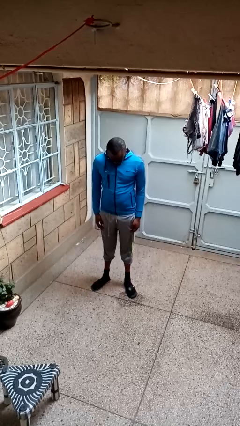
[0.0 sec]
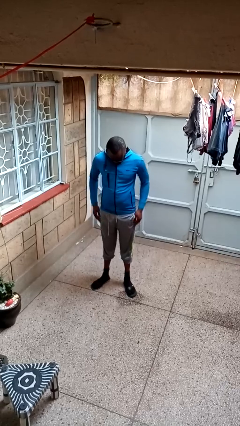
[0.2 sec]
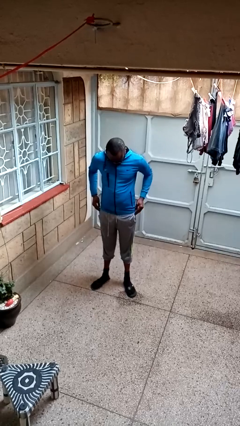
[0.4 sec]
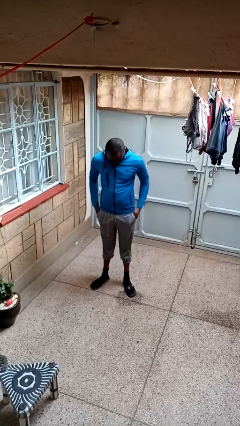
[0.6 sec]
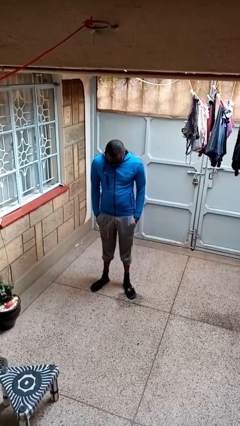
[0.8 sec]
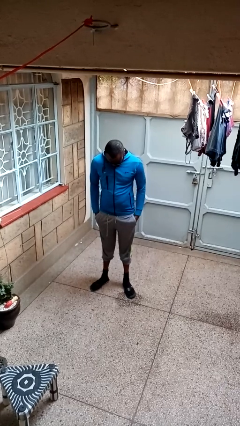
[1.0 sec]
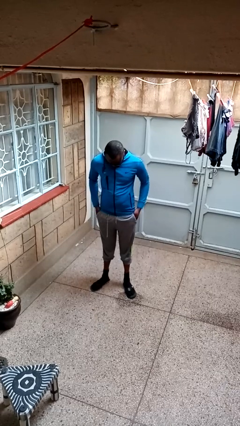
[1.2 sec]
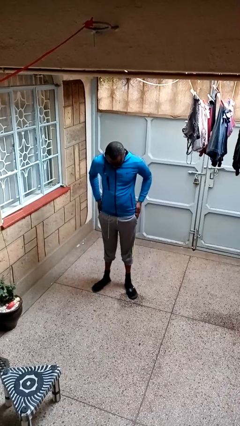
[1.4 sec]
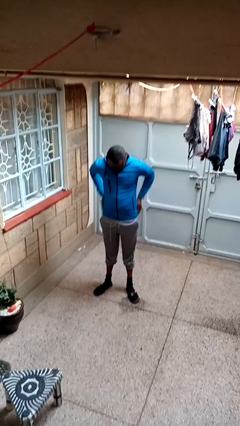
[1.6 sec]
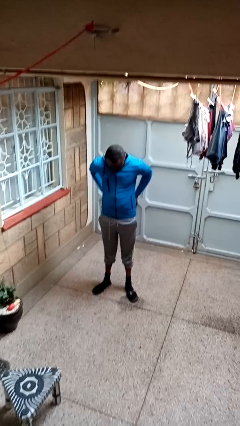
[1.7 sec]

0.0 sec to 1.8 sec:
person puts hands in back pockets

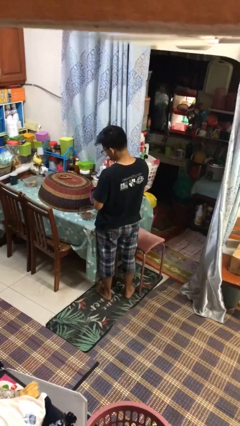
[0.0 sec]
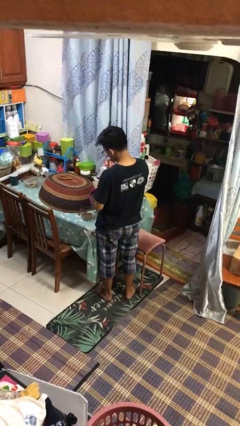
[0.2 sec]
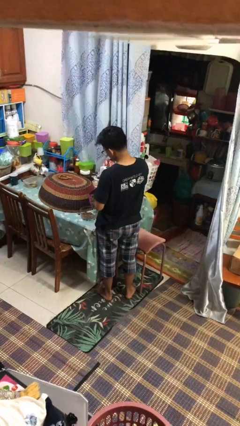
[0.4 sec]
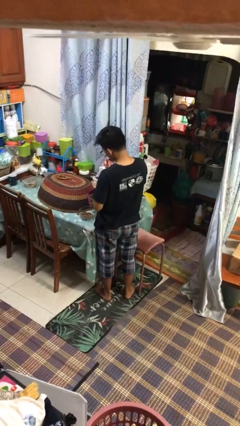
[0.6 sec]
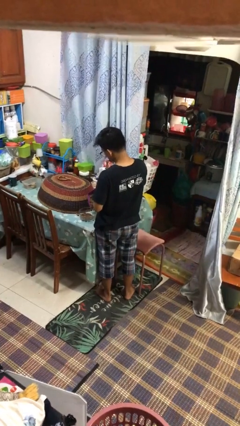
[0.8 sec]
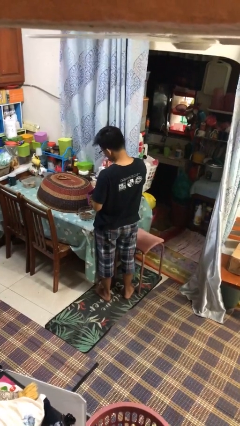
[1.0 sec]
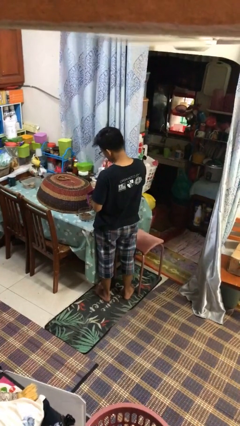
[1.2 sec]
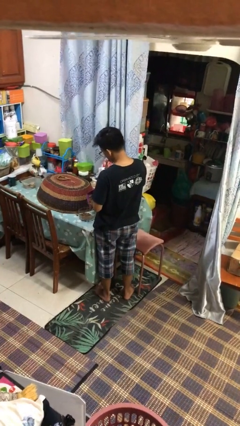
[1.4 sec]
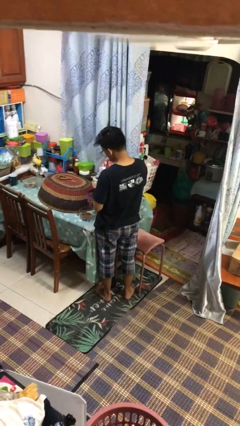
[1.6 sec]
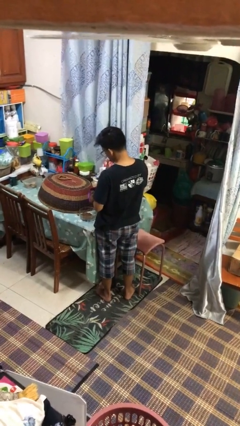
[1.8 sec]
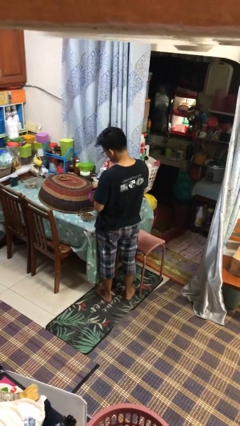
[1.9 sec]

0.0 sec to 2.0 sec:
person pours into bowl

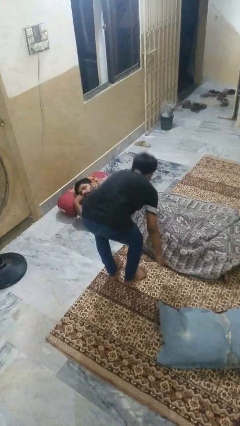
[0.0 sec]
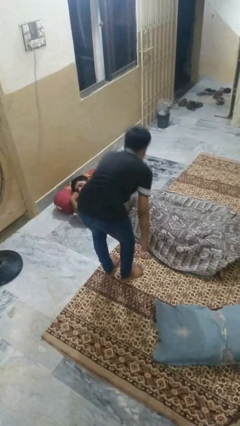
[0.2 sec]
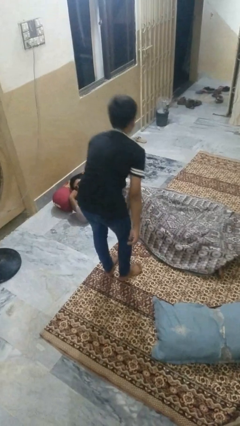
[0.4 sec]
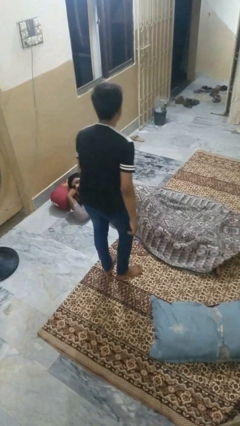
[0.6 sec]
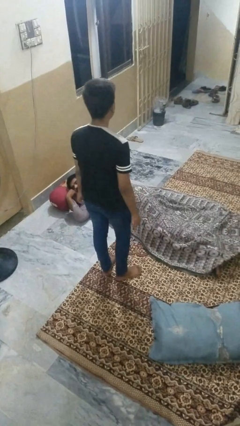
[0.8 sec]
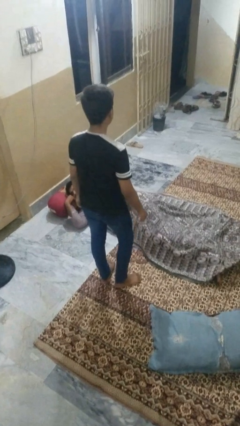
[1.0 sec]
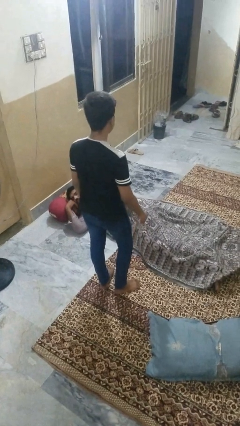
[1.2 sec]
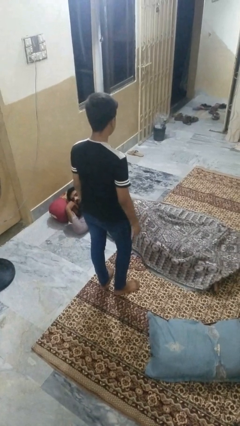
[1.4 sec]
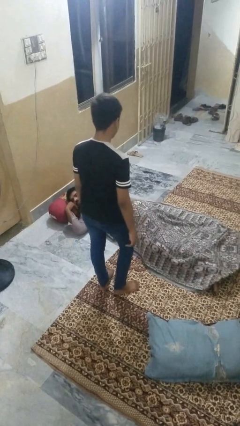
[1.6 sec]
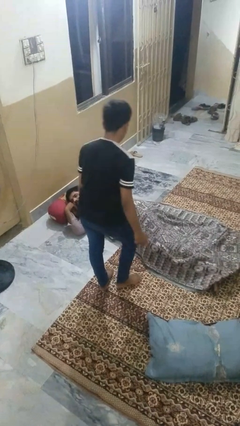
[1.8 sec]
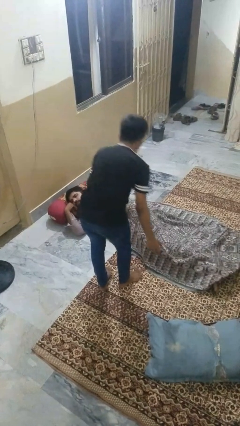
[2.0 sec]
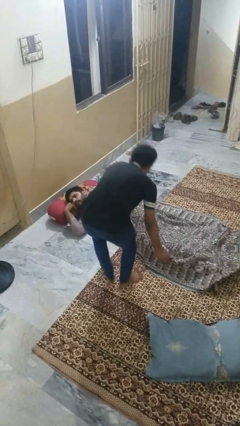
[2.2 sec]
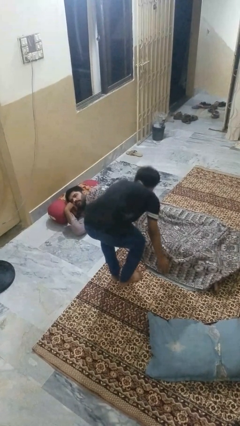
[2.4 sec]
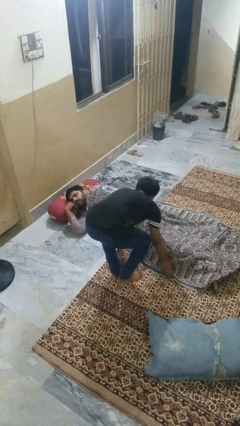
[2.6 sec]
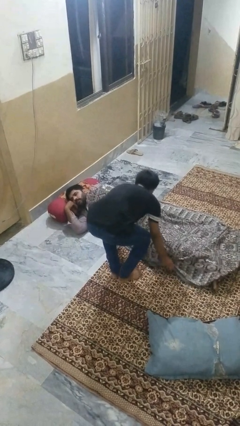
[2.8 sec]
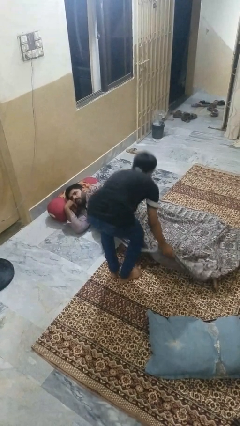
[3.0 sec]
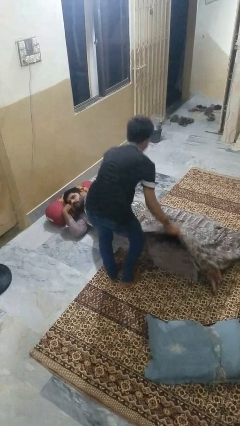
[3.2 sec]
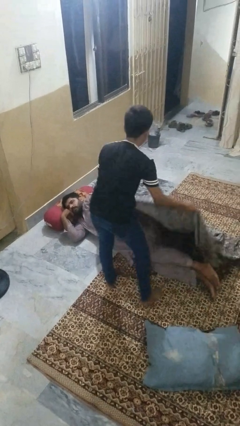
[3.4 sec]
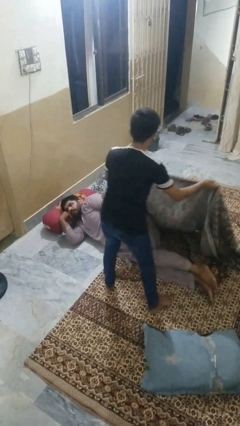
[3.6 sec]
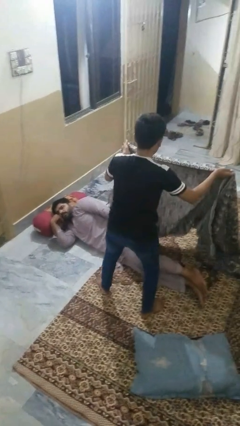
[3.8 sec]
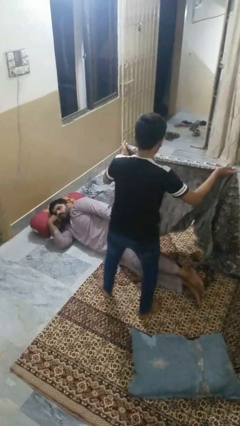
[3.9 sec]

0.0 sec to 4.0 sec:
person uncovers friend with blanket

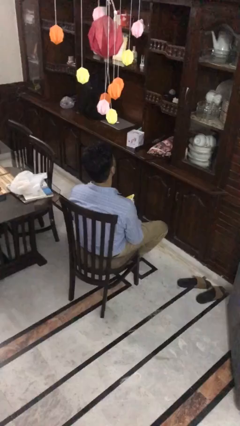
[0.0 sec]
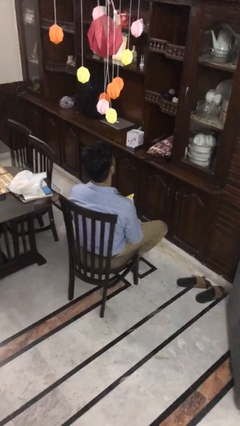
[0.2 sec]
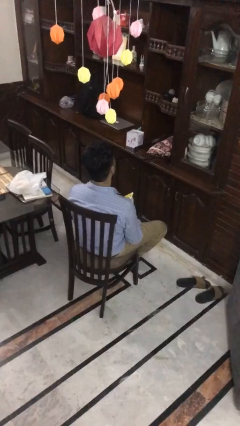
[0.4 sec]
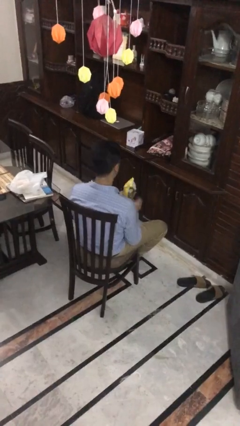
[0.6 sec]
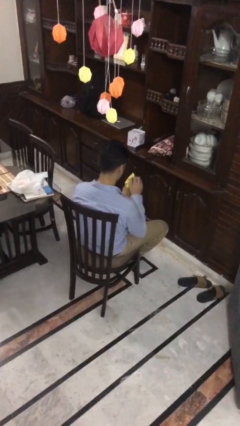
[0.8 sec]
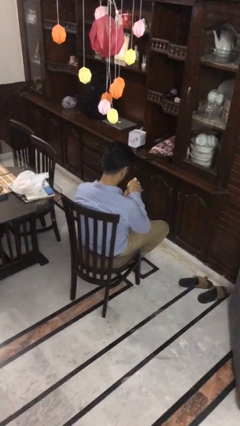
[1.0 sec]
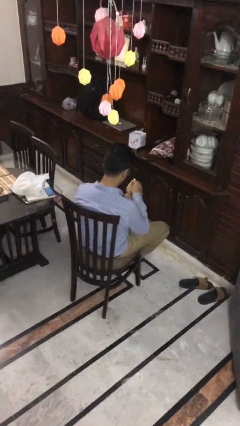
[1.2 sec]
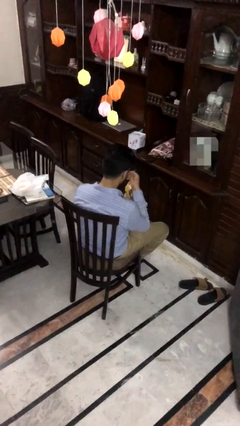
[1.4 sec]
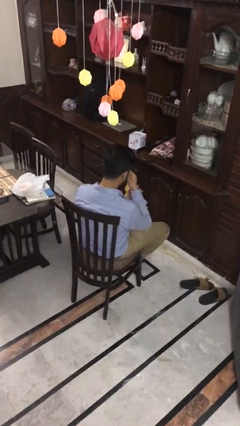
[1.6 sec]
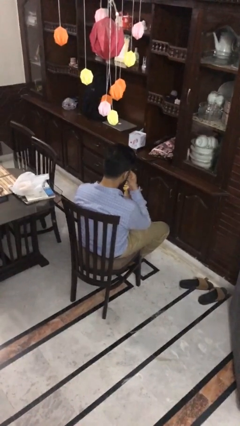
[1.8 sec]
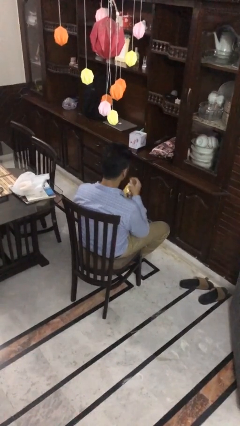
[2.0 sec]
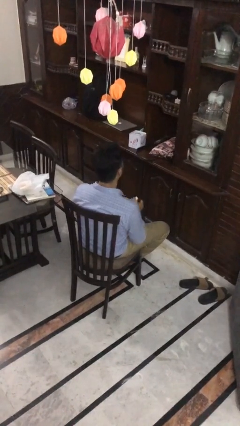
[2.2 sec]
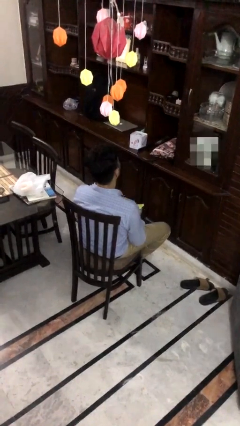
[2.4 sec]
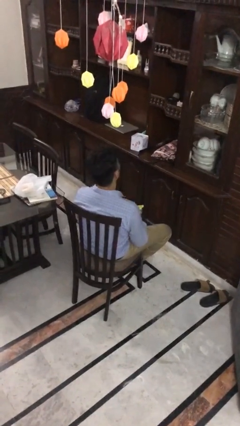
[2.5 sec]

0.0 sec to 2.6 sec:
person eats snack from bag

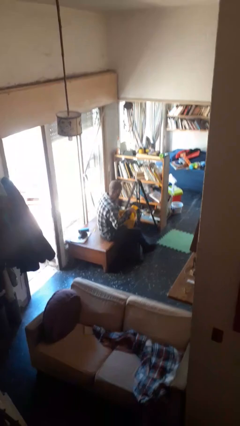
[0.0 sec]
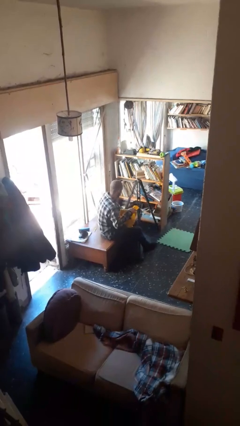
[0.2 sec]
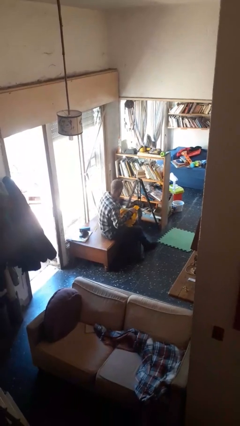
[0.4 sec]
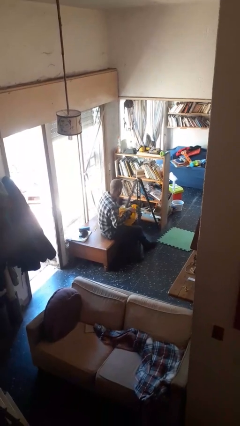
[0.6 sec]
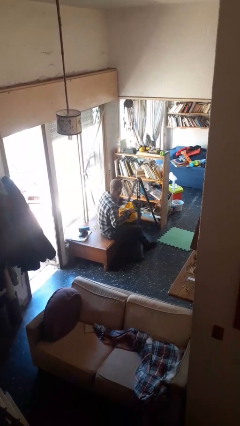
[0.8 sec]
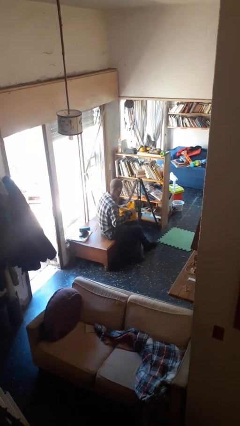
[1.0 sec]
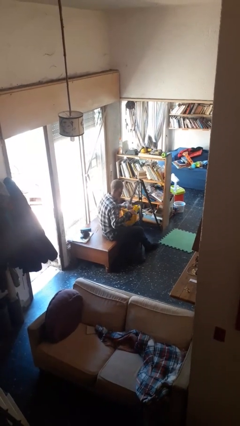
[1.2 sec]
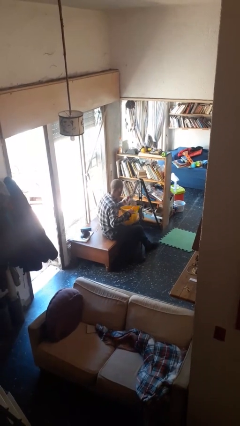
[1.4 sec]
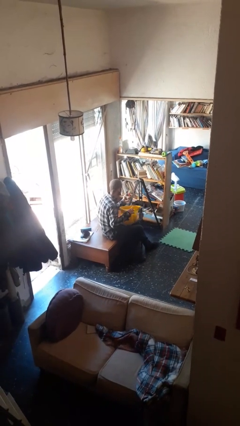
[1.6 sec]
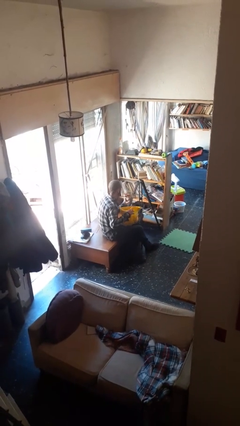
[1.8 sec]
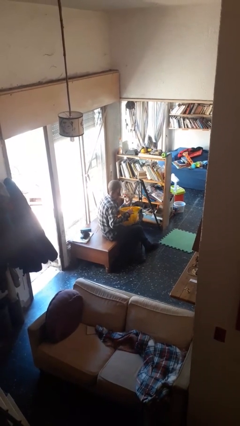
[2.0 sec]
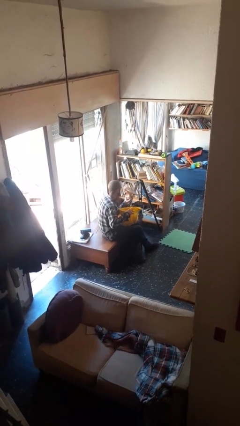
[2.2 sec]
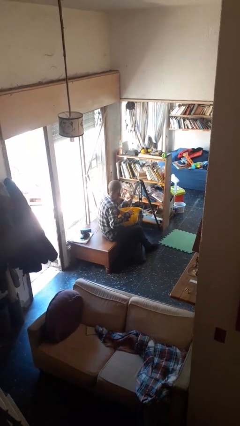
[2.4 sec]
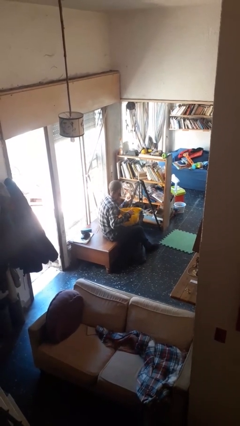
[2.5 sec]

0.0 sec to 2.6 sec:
person takes object from bag

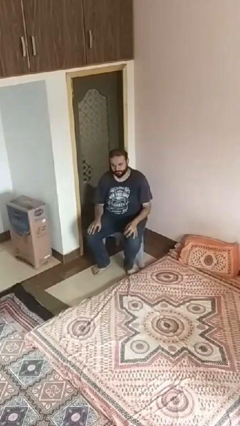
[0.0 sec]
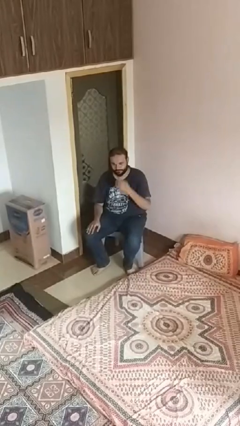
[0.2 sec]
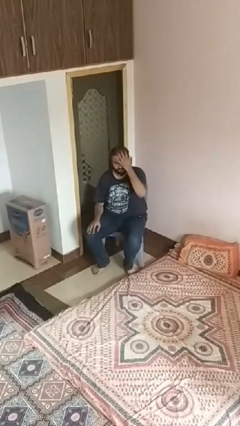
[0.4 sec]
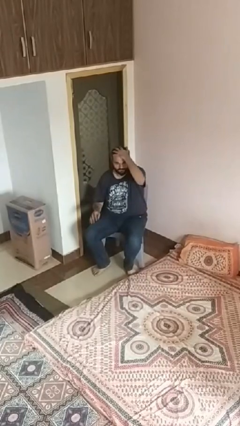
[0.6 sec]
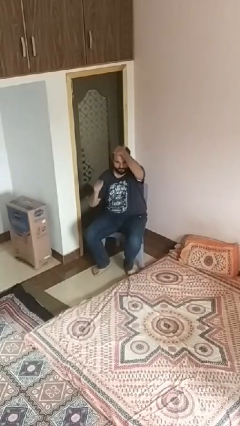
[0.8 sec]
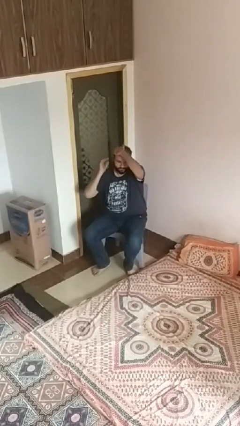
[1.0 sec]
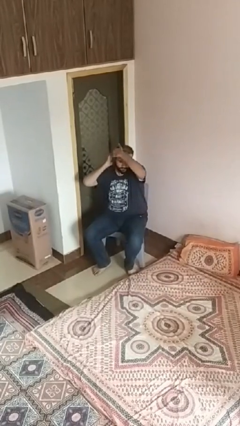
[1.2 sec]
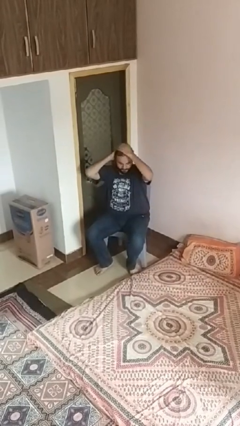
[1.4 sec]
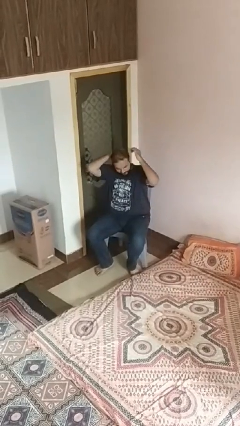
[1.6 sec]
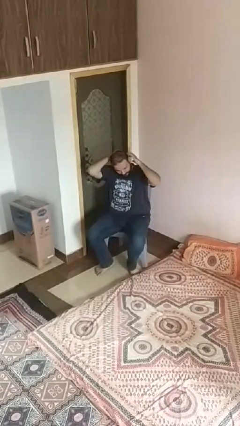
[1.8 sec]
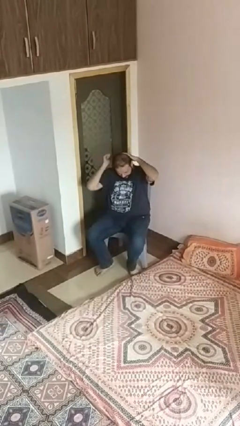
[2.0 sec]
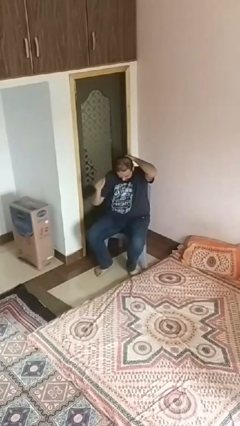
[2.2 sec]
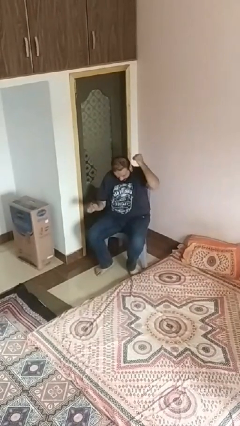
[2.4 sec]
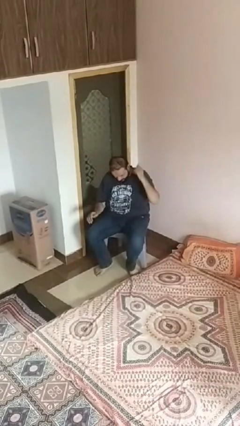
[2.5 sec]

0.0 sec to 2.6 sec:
person strokes hair

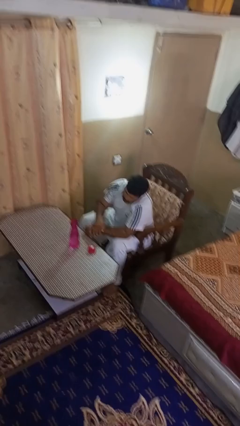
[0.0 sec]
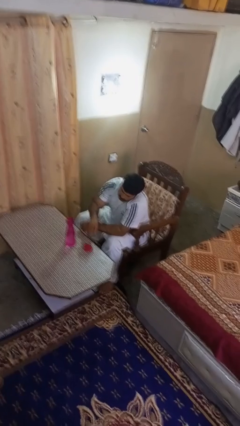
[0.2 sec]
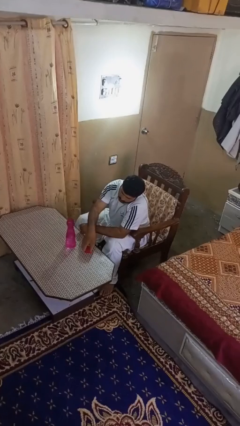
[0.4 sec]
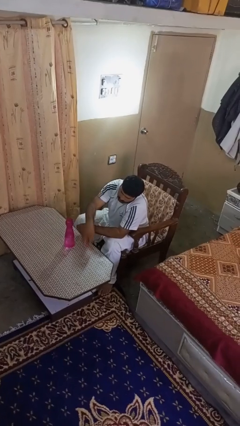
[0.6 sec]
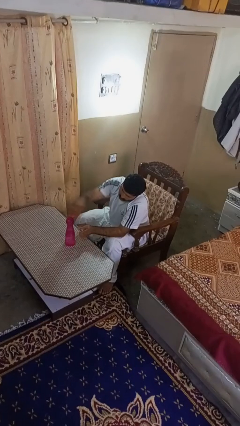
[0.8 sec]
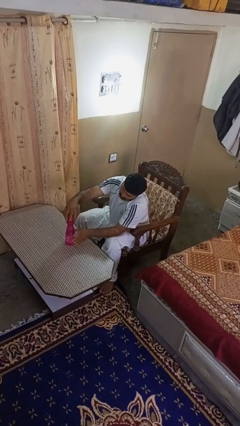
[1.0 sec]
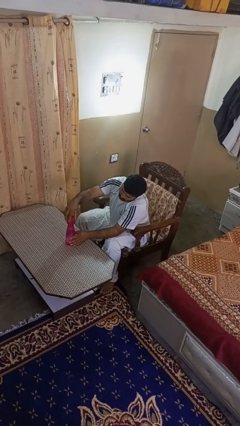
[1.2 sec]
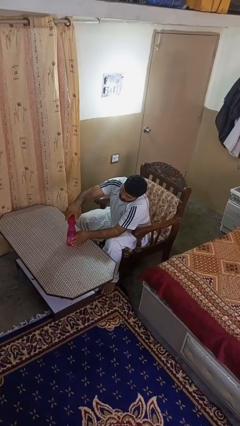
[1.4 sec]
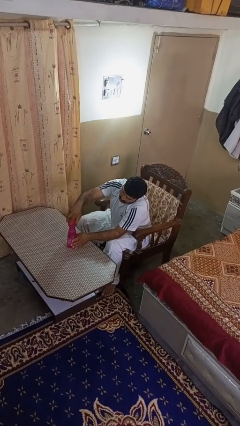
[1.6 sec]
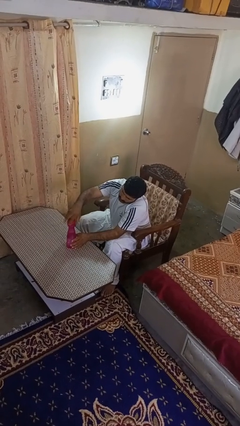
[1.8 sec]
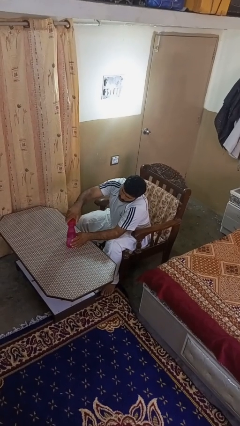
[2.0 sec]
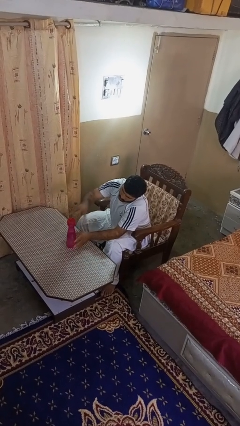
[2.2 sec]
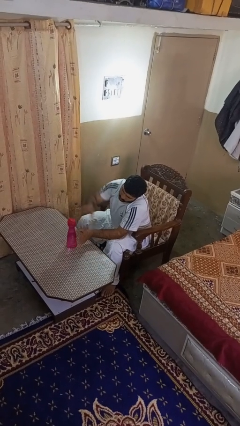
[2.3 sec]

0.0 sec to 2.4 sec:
person screws lid to bottle
